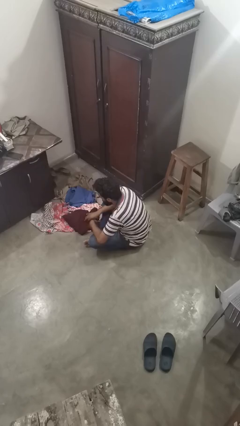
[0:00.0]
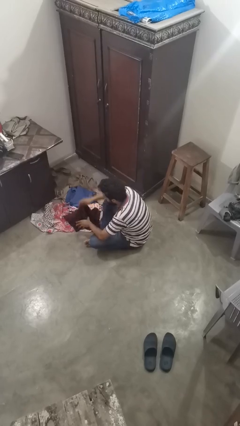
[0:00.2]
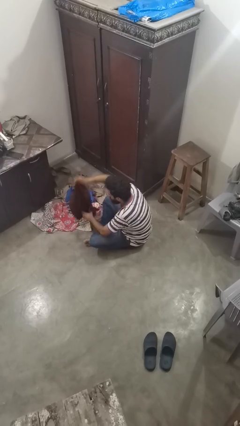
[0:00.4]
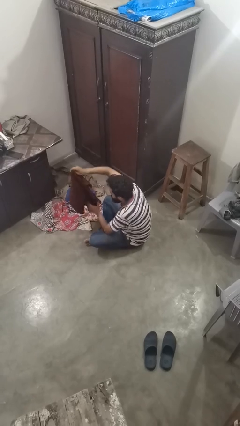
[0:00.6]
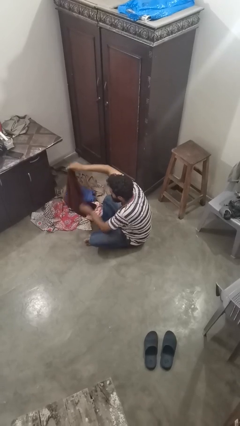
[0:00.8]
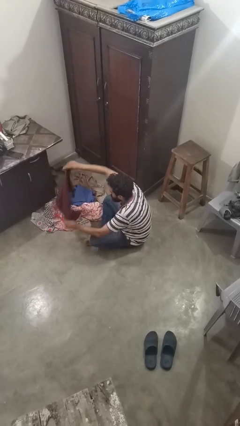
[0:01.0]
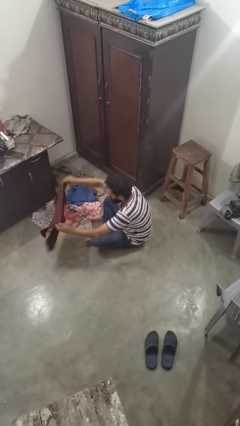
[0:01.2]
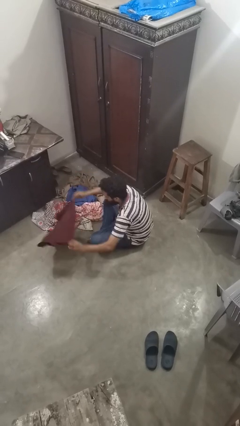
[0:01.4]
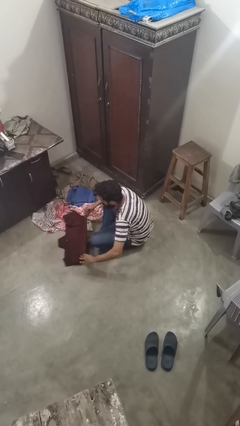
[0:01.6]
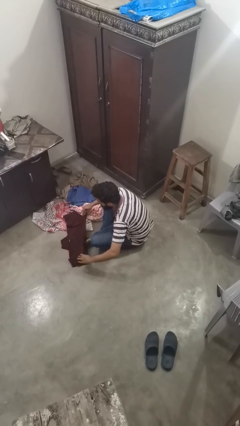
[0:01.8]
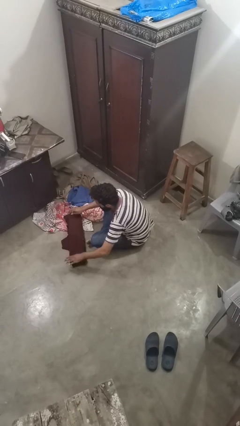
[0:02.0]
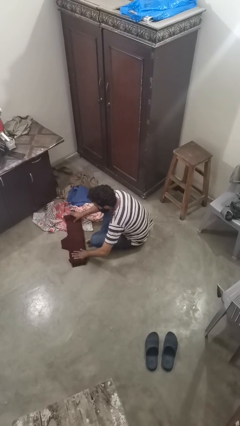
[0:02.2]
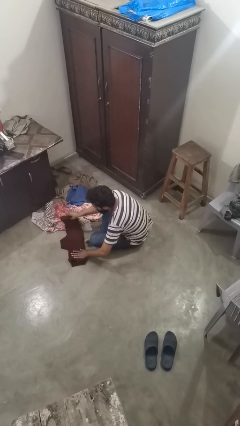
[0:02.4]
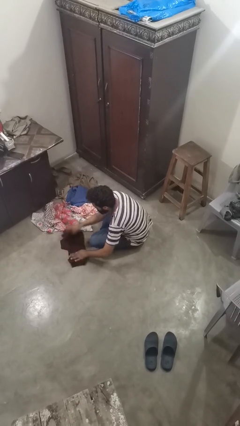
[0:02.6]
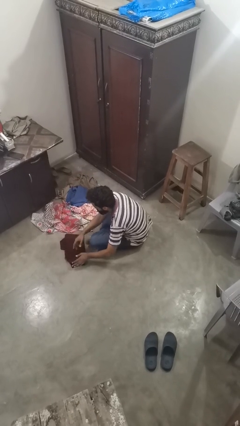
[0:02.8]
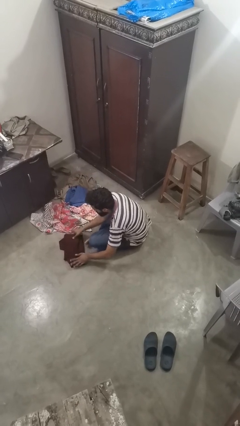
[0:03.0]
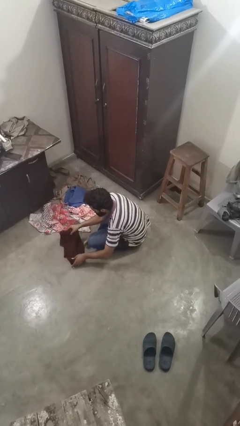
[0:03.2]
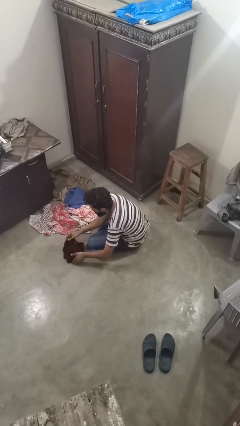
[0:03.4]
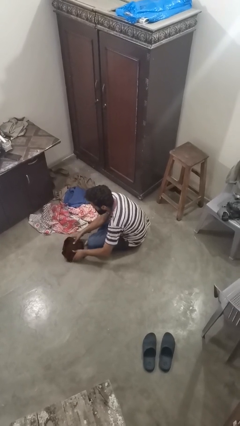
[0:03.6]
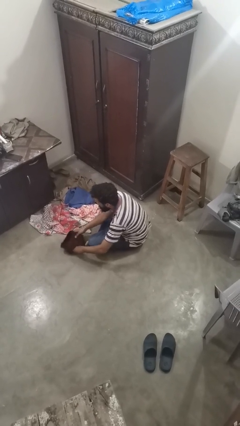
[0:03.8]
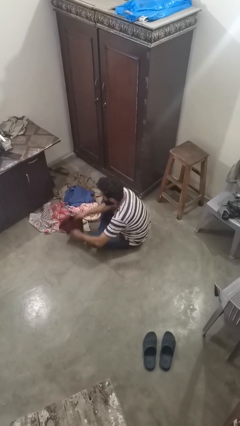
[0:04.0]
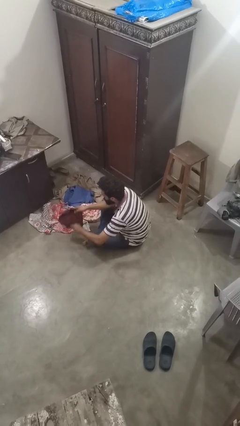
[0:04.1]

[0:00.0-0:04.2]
person folds shirt

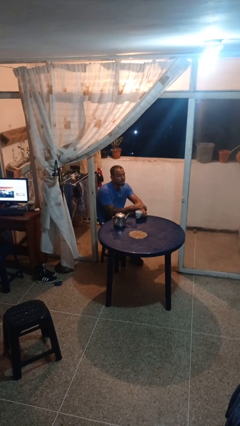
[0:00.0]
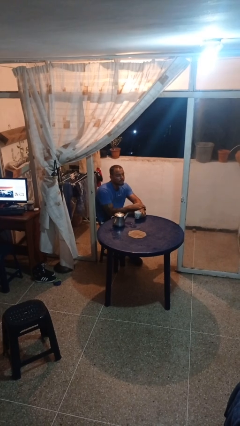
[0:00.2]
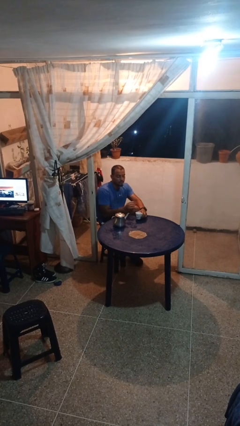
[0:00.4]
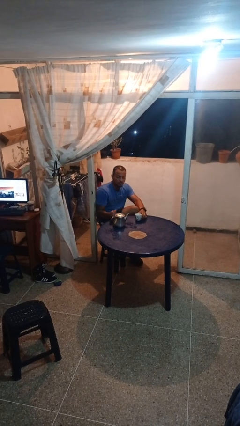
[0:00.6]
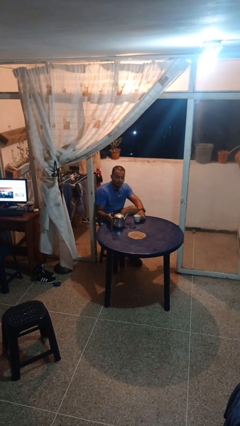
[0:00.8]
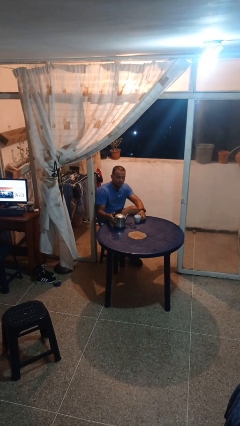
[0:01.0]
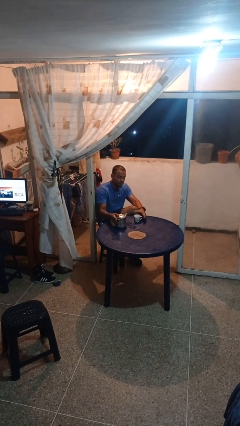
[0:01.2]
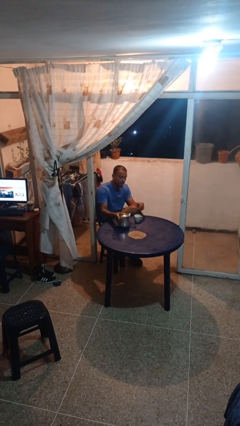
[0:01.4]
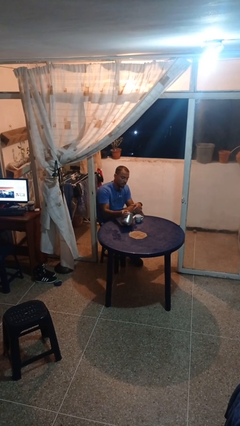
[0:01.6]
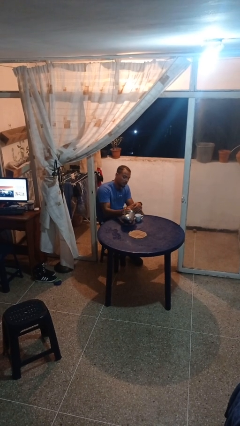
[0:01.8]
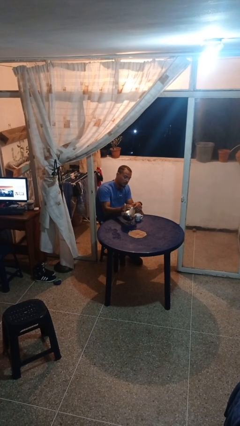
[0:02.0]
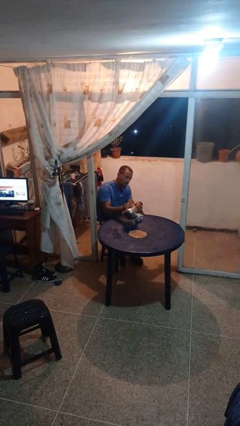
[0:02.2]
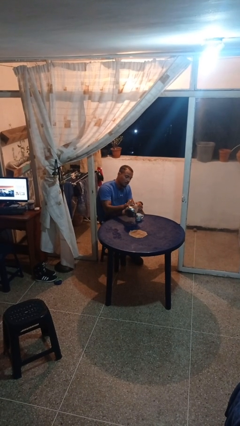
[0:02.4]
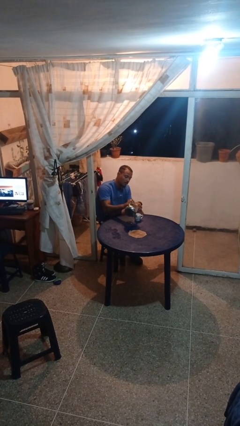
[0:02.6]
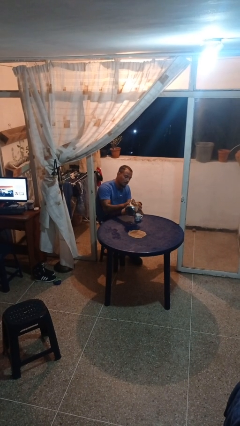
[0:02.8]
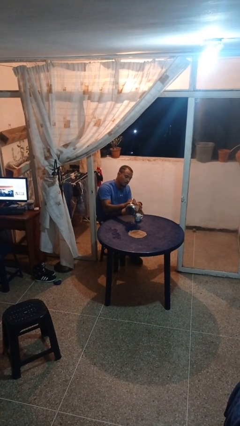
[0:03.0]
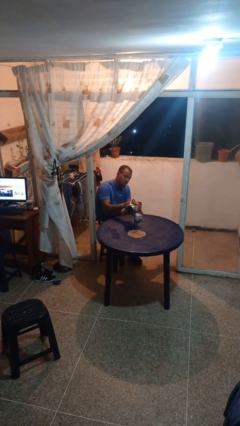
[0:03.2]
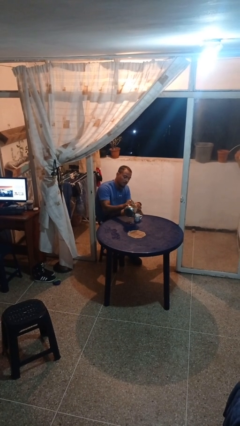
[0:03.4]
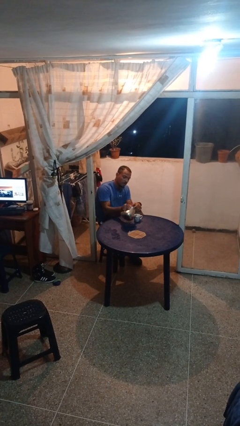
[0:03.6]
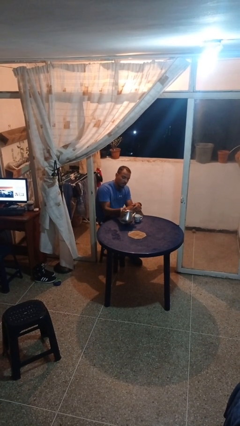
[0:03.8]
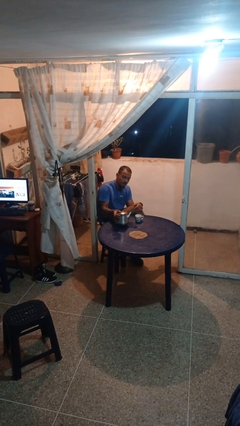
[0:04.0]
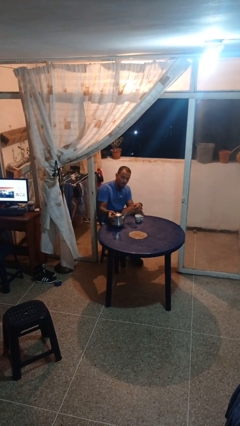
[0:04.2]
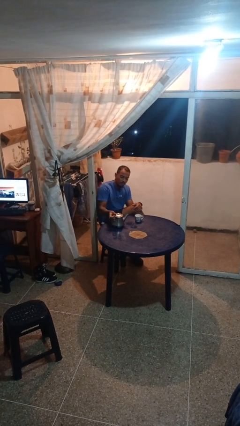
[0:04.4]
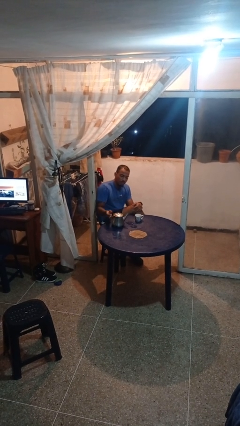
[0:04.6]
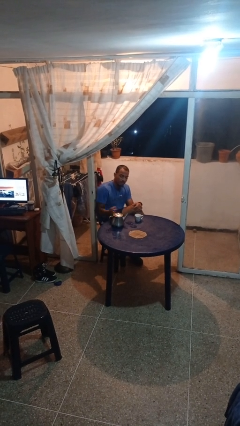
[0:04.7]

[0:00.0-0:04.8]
person pours coffee into mug

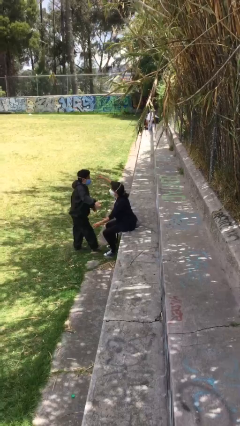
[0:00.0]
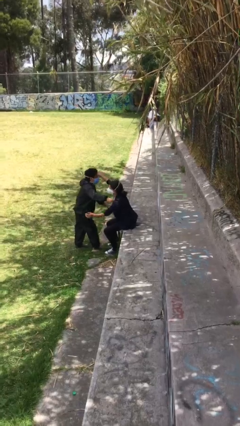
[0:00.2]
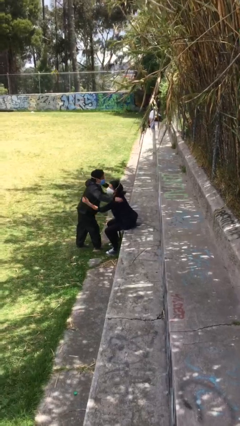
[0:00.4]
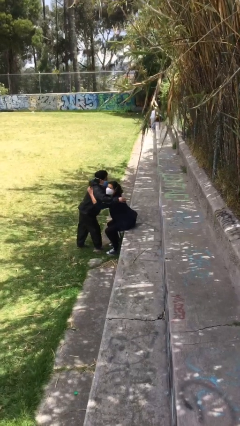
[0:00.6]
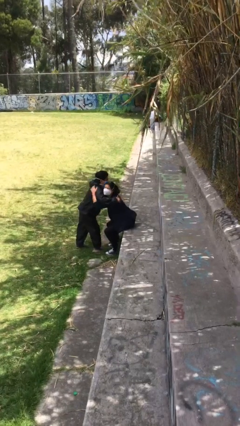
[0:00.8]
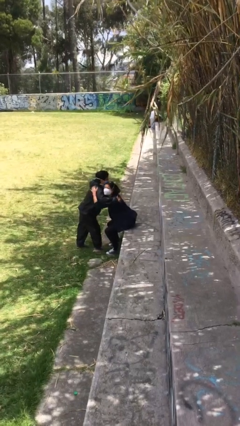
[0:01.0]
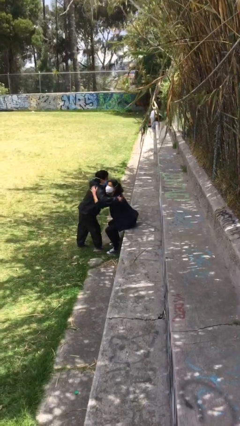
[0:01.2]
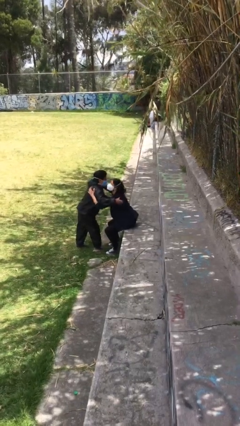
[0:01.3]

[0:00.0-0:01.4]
person embraces person

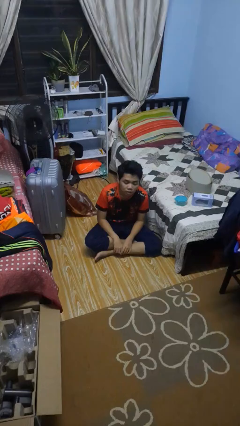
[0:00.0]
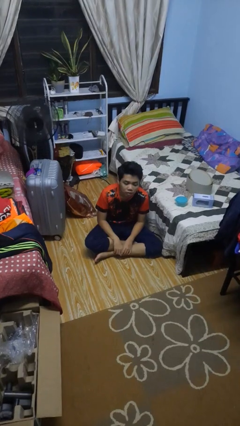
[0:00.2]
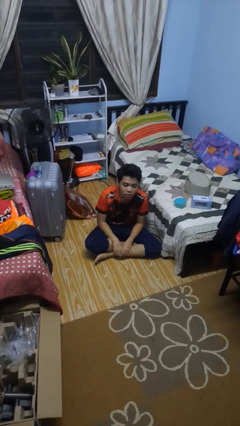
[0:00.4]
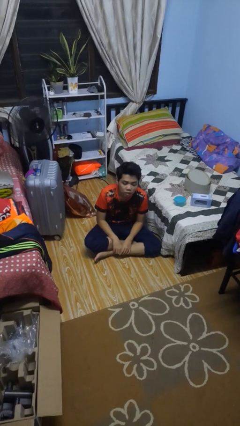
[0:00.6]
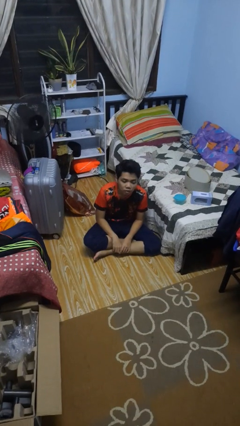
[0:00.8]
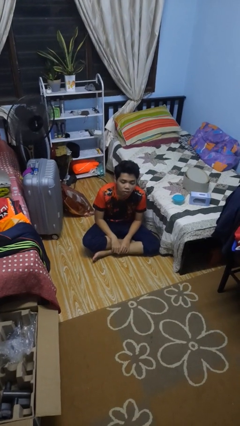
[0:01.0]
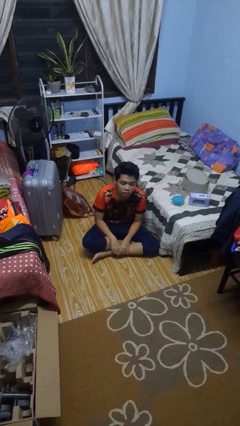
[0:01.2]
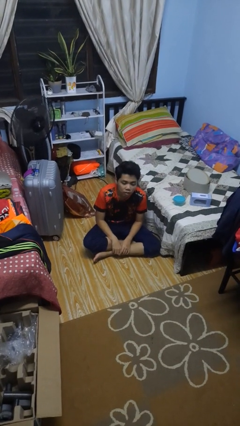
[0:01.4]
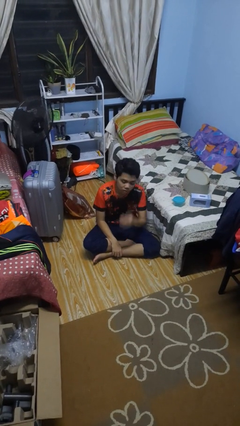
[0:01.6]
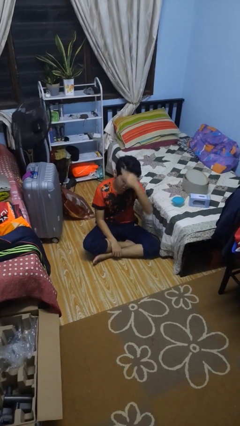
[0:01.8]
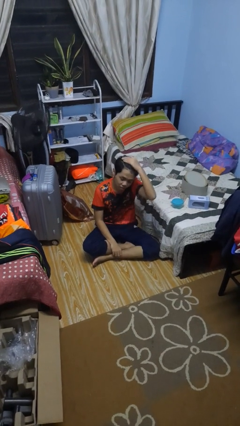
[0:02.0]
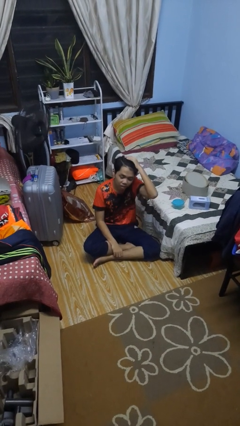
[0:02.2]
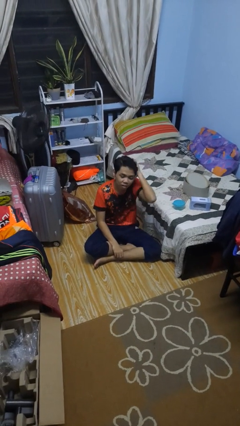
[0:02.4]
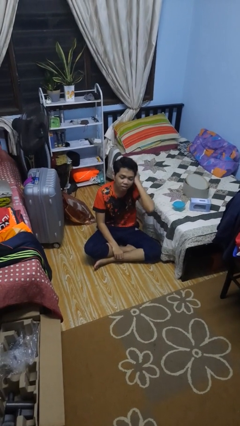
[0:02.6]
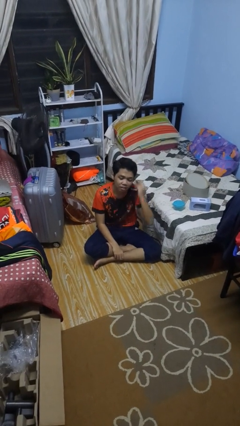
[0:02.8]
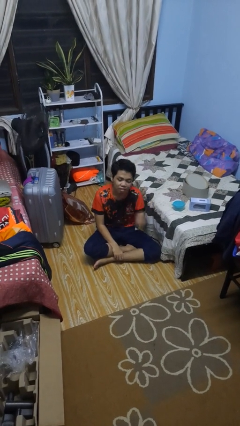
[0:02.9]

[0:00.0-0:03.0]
person strokes hair

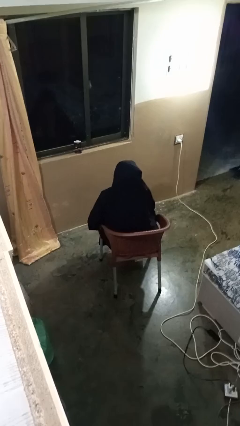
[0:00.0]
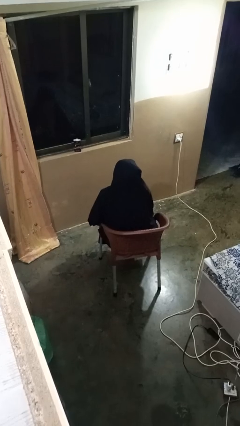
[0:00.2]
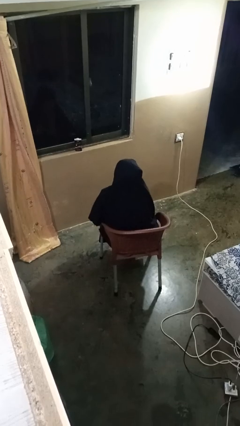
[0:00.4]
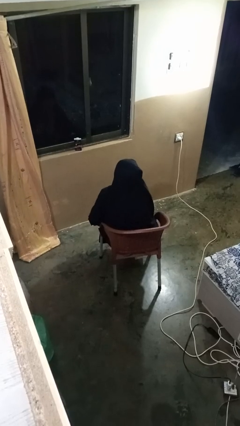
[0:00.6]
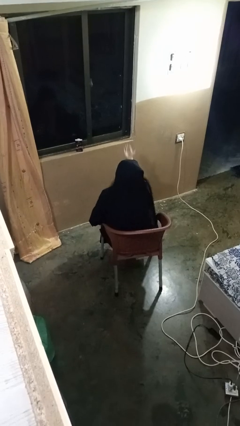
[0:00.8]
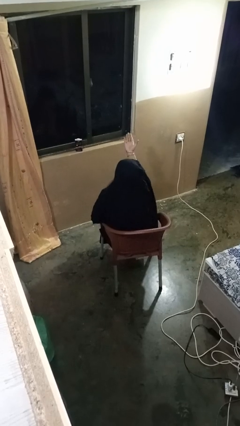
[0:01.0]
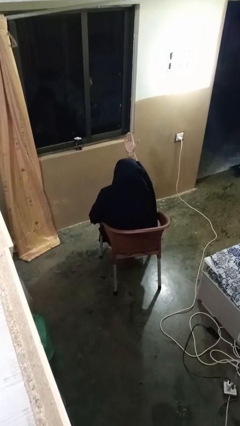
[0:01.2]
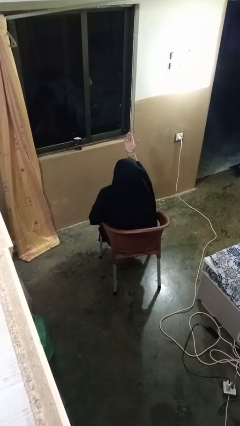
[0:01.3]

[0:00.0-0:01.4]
person gestures swipe up

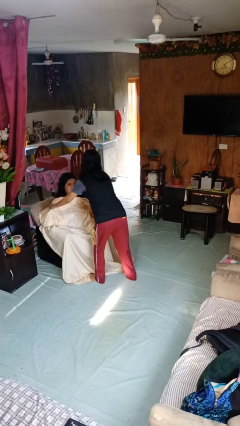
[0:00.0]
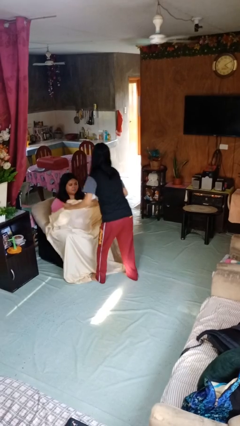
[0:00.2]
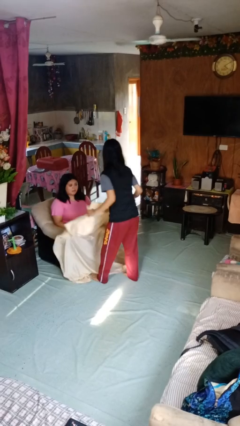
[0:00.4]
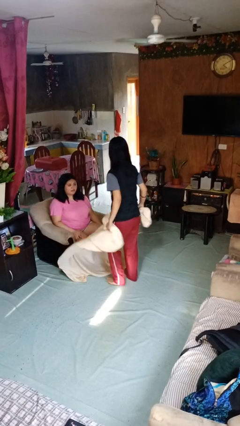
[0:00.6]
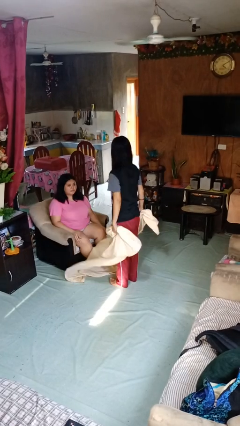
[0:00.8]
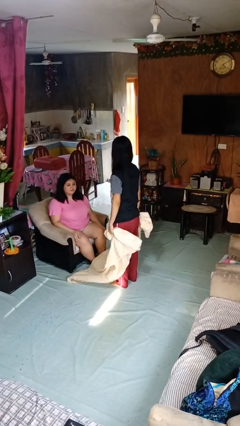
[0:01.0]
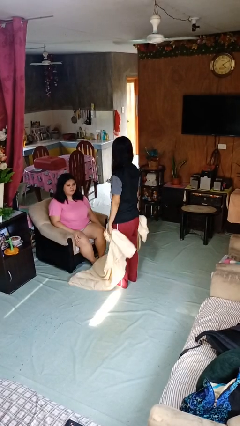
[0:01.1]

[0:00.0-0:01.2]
person uncovers friend with blanket

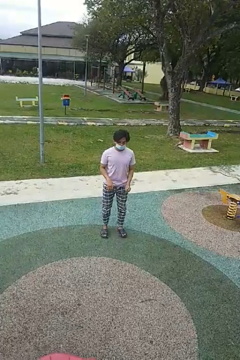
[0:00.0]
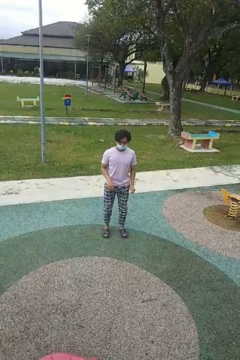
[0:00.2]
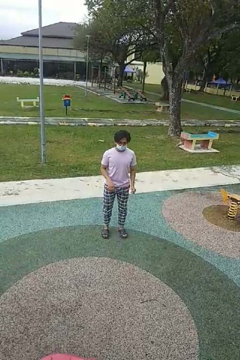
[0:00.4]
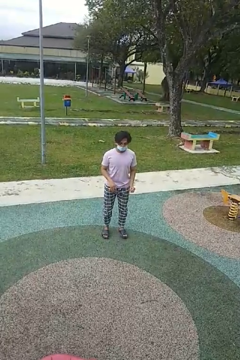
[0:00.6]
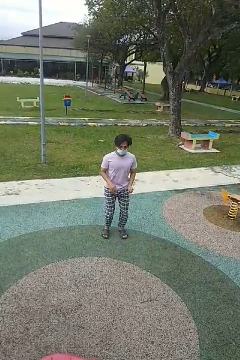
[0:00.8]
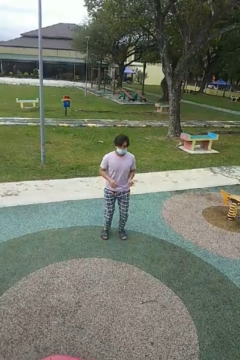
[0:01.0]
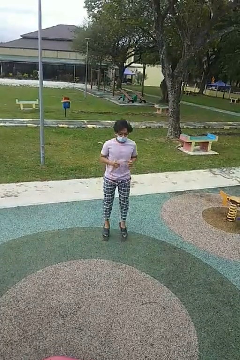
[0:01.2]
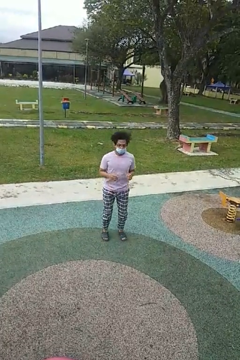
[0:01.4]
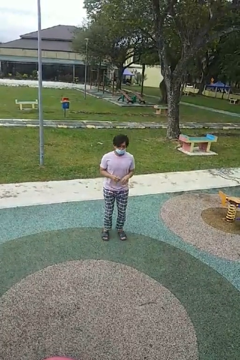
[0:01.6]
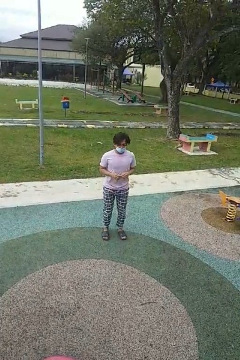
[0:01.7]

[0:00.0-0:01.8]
person jumps
